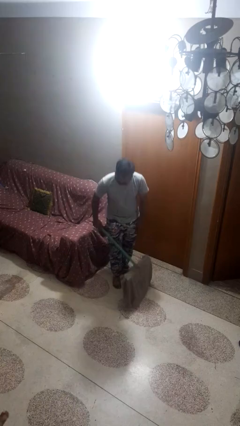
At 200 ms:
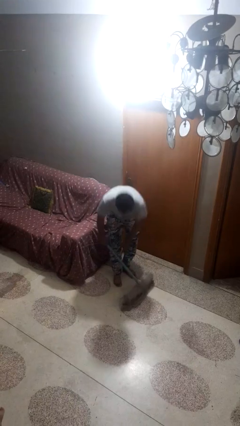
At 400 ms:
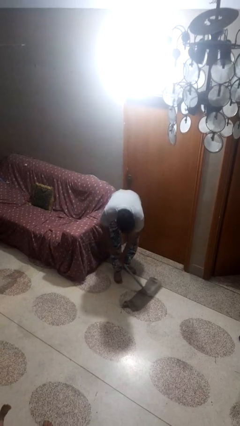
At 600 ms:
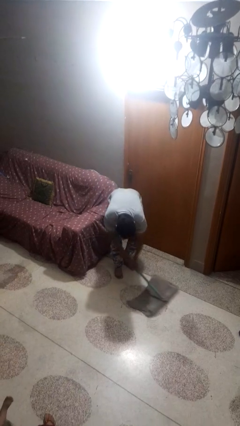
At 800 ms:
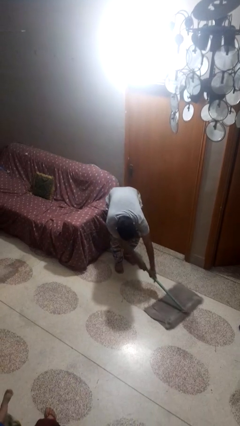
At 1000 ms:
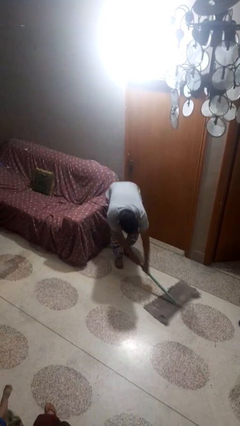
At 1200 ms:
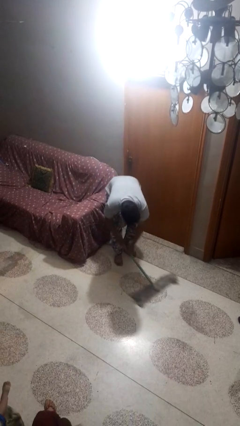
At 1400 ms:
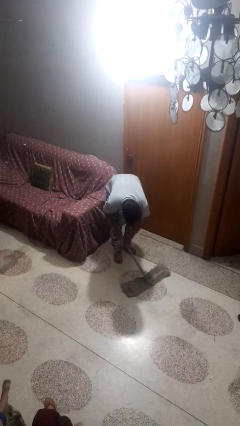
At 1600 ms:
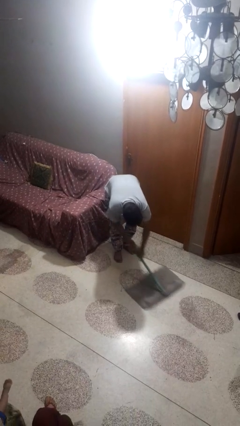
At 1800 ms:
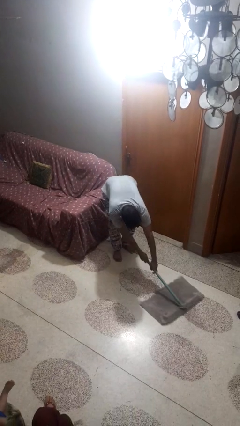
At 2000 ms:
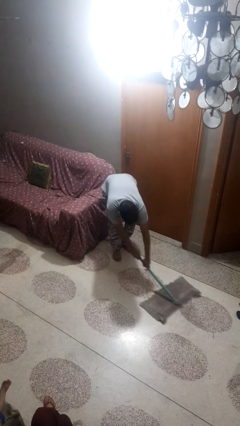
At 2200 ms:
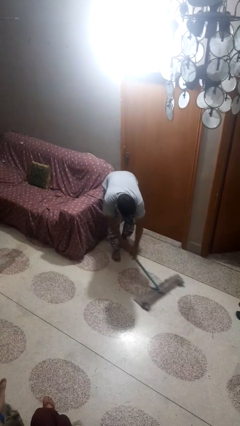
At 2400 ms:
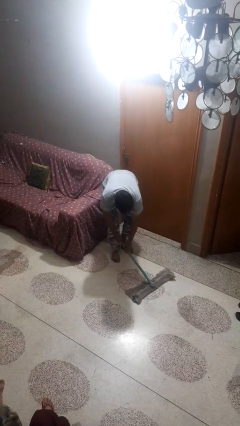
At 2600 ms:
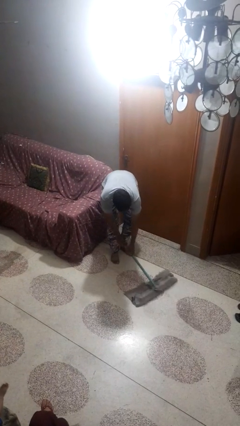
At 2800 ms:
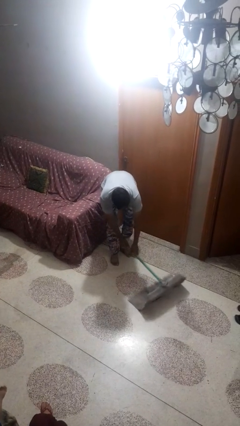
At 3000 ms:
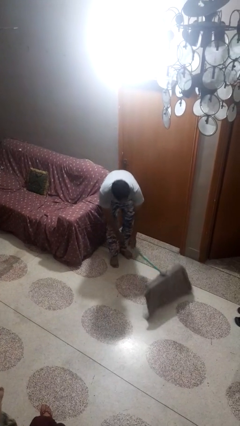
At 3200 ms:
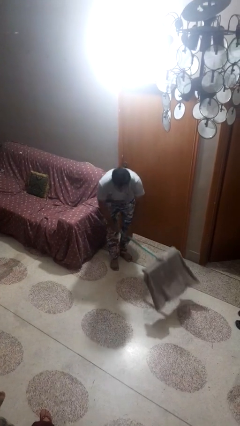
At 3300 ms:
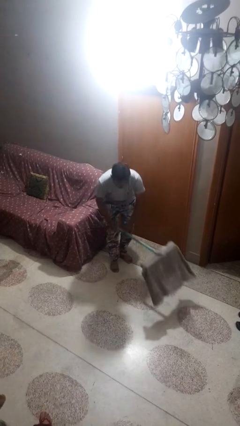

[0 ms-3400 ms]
person mops

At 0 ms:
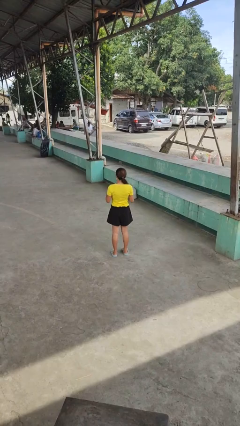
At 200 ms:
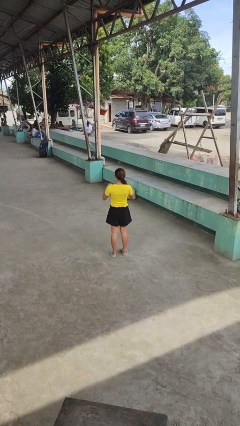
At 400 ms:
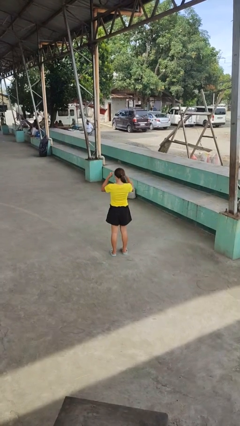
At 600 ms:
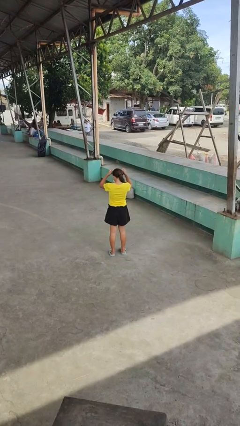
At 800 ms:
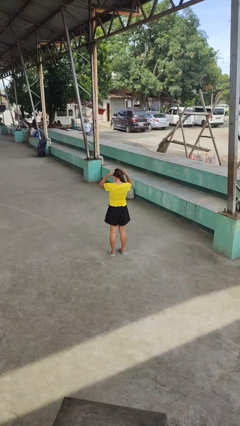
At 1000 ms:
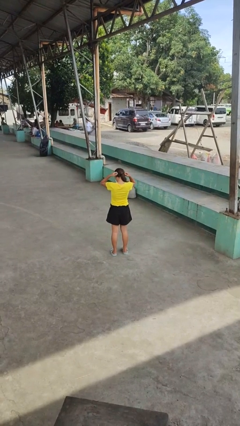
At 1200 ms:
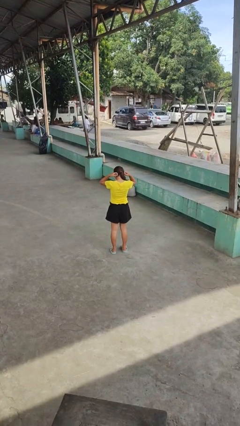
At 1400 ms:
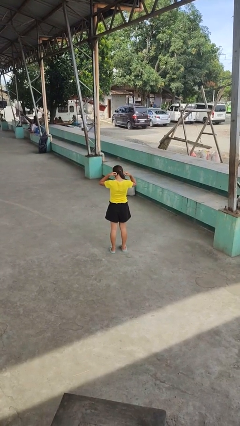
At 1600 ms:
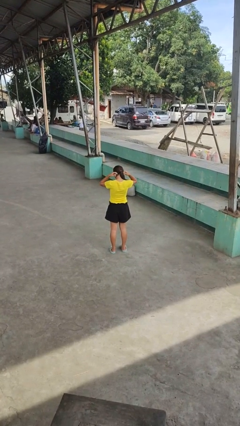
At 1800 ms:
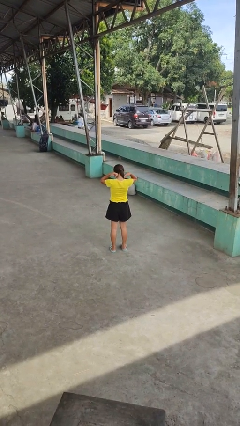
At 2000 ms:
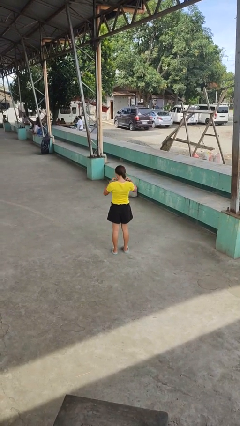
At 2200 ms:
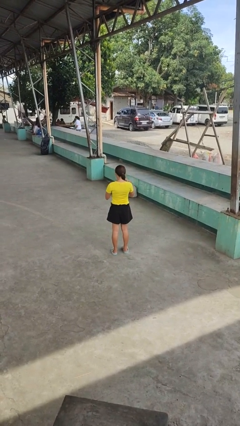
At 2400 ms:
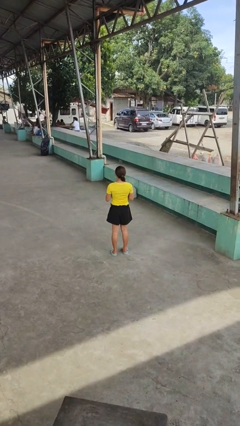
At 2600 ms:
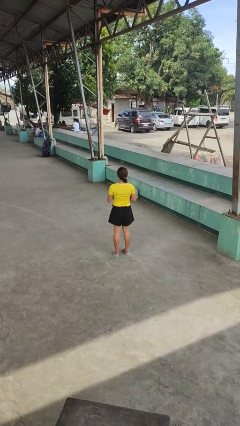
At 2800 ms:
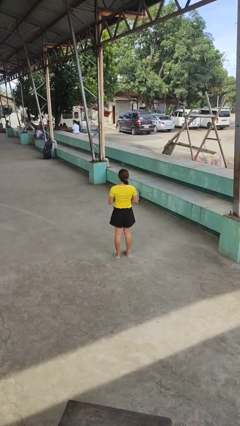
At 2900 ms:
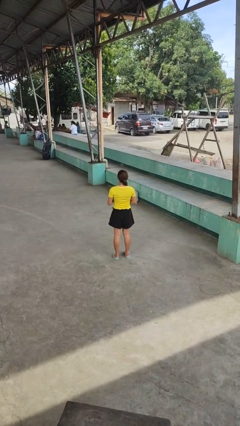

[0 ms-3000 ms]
person puts on necklace

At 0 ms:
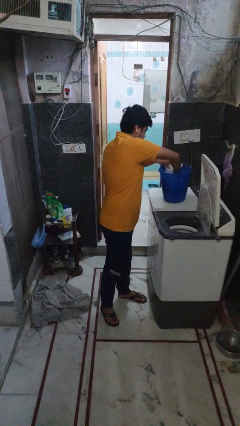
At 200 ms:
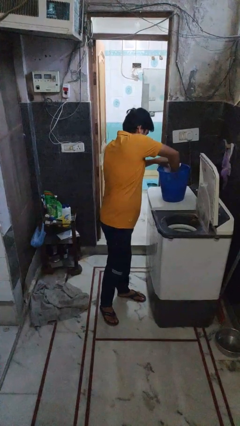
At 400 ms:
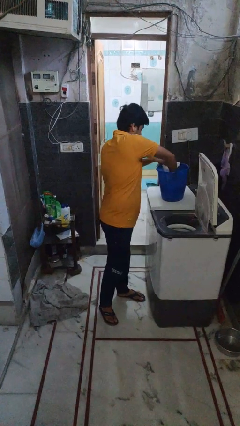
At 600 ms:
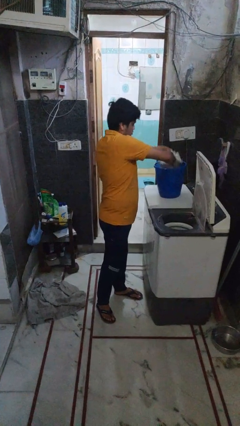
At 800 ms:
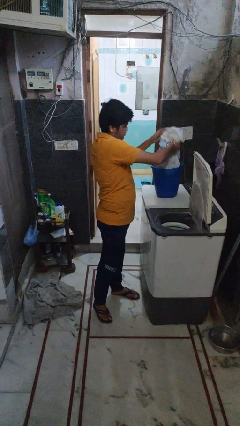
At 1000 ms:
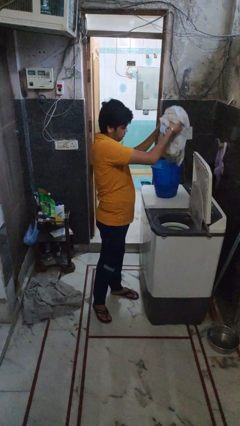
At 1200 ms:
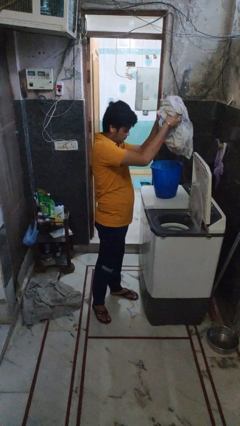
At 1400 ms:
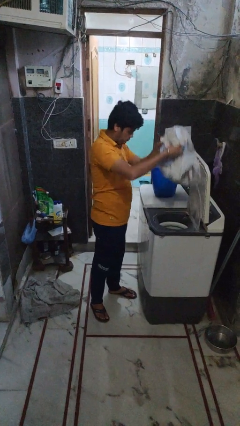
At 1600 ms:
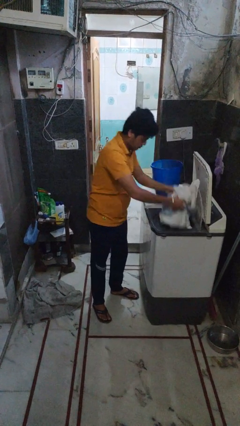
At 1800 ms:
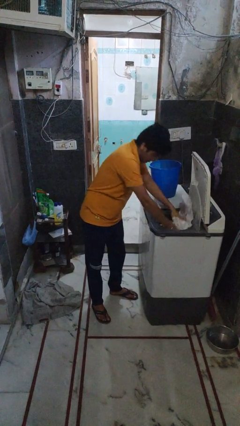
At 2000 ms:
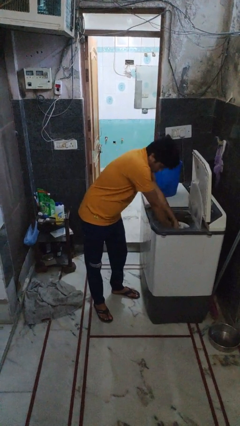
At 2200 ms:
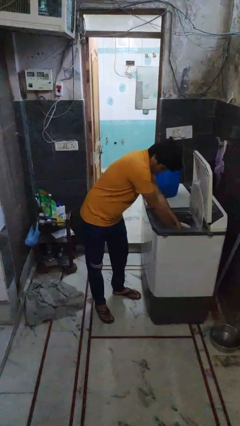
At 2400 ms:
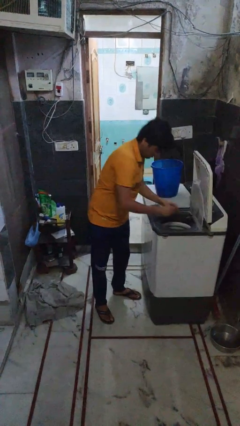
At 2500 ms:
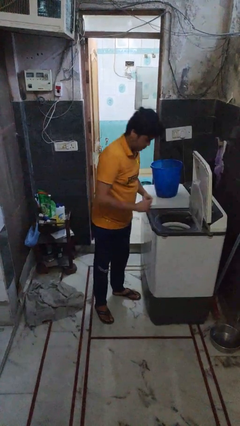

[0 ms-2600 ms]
person loads clotheswasher

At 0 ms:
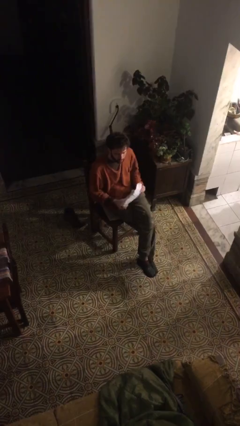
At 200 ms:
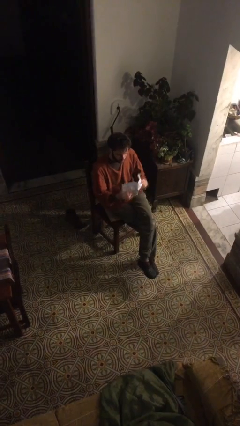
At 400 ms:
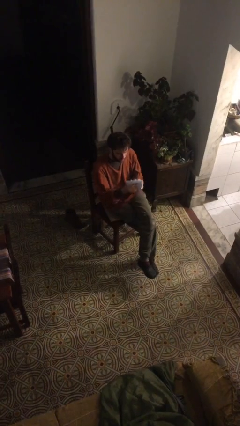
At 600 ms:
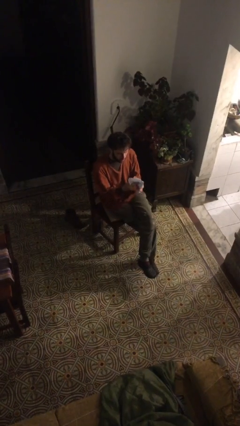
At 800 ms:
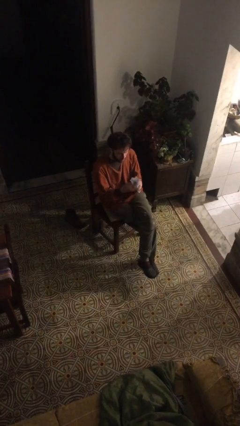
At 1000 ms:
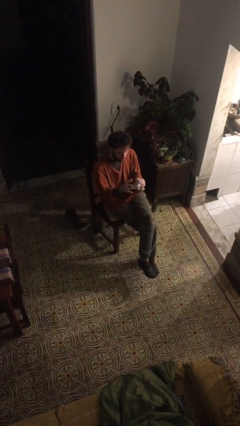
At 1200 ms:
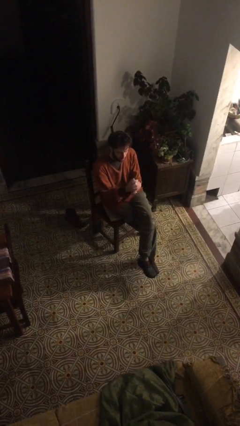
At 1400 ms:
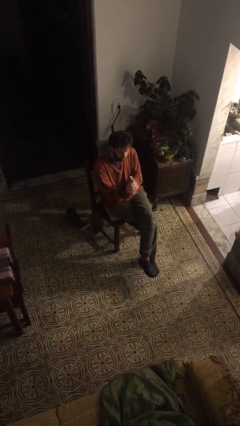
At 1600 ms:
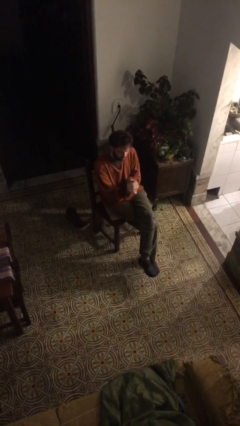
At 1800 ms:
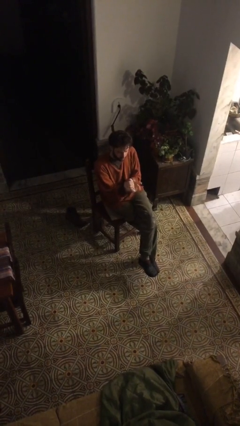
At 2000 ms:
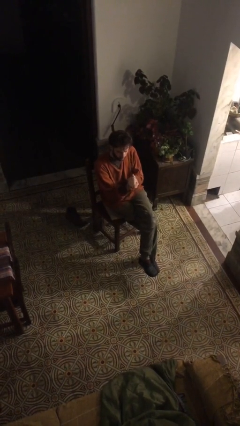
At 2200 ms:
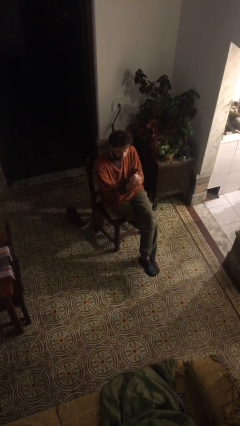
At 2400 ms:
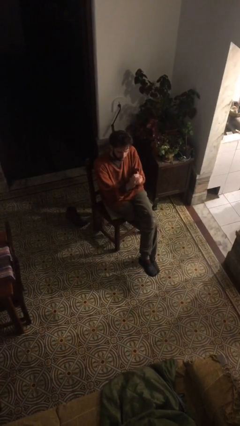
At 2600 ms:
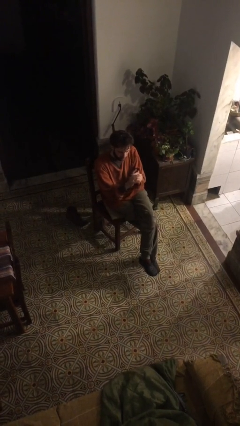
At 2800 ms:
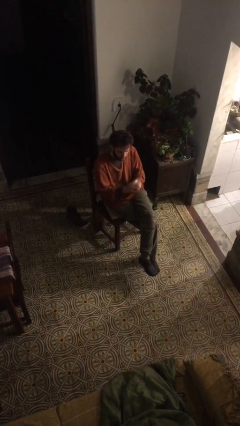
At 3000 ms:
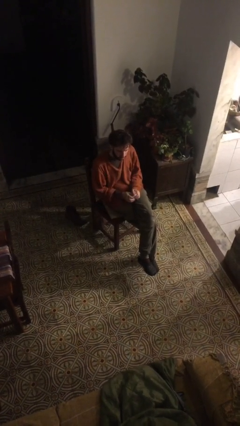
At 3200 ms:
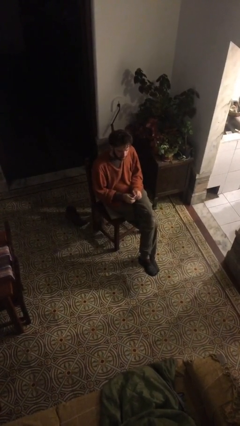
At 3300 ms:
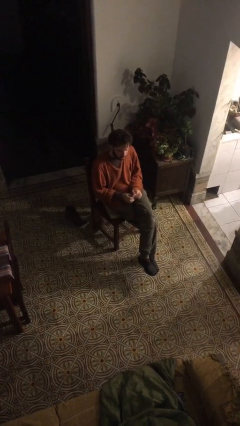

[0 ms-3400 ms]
person crumples paper

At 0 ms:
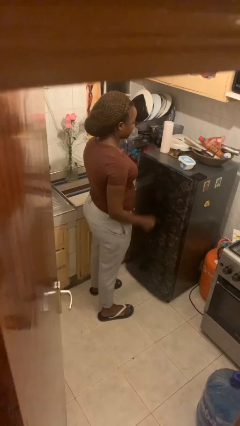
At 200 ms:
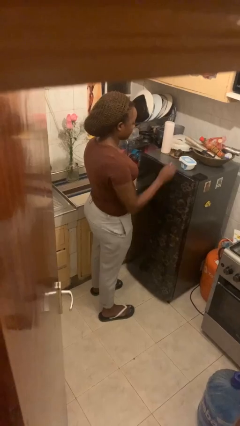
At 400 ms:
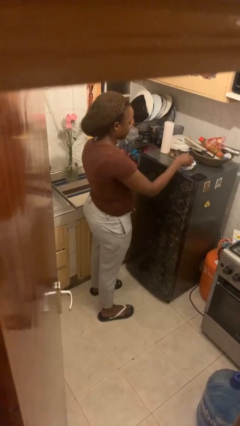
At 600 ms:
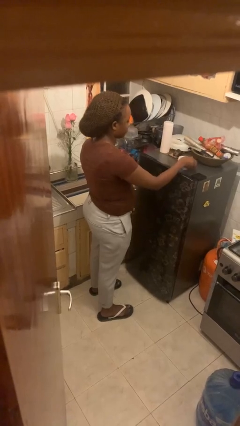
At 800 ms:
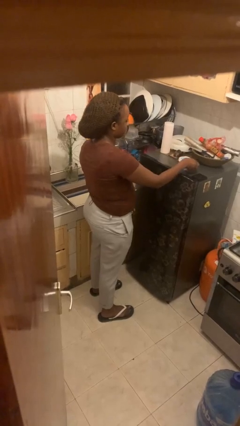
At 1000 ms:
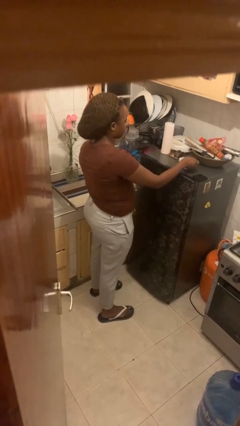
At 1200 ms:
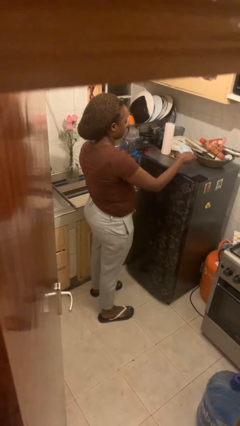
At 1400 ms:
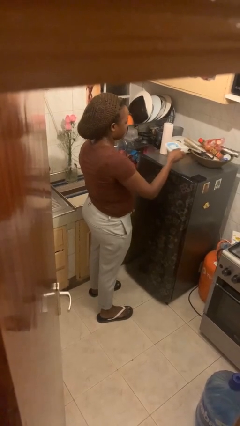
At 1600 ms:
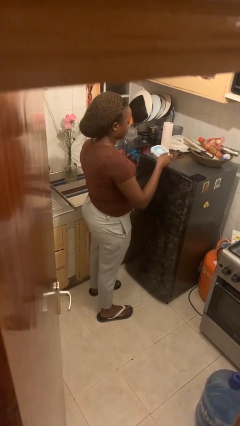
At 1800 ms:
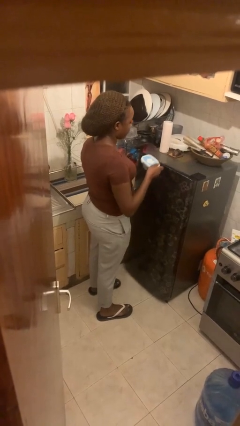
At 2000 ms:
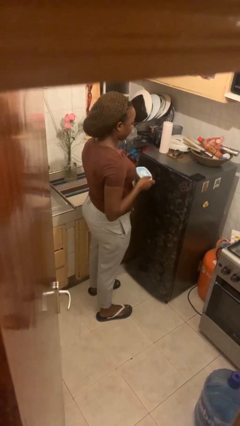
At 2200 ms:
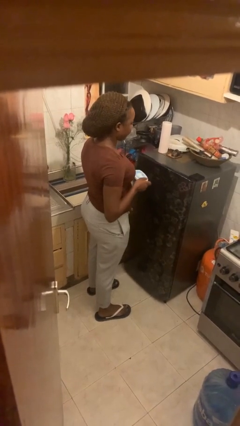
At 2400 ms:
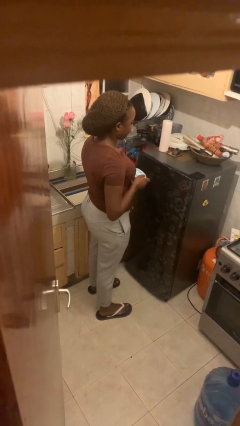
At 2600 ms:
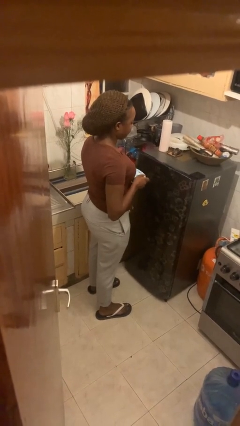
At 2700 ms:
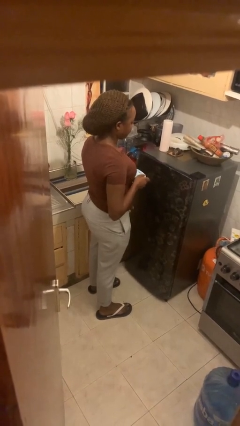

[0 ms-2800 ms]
person picks up object from countertop

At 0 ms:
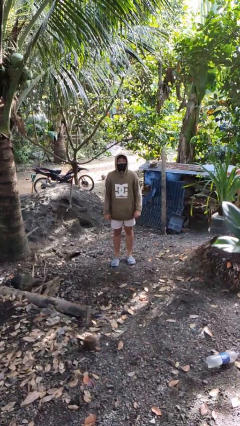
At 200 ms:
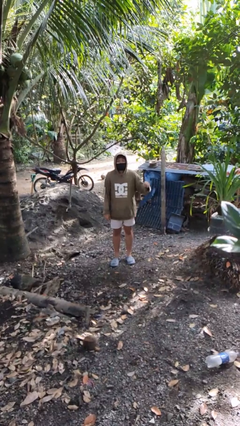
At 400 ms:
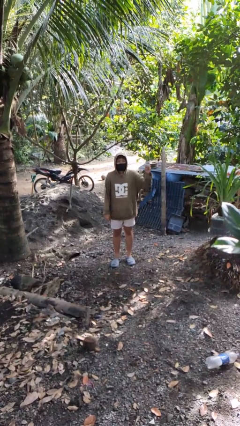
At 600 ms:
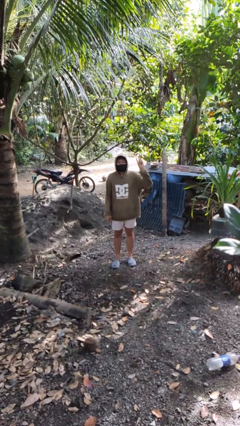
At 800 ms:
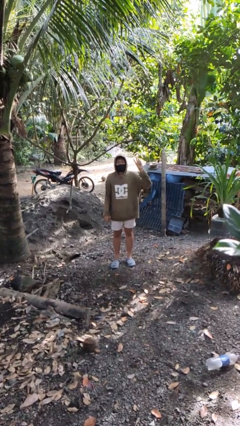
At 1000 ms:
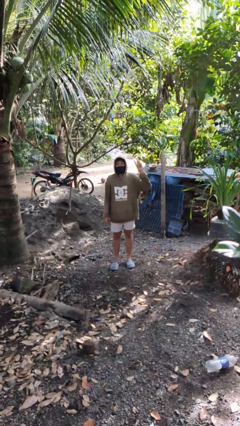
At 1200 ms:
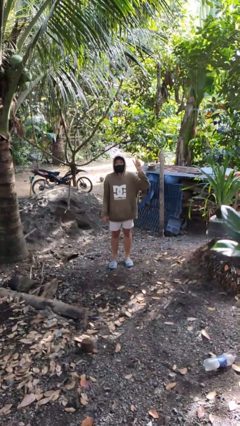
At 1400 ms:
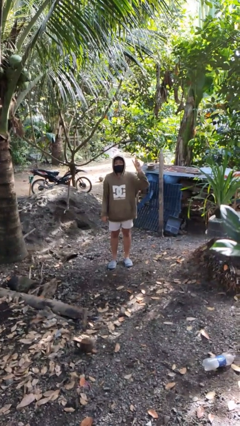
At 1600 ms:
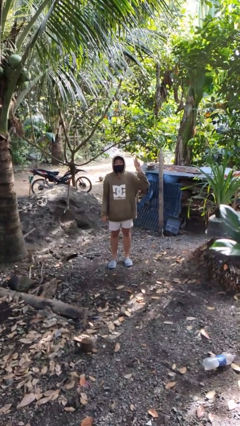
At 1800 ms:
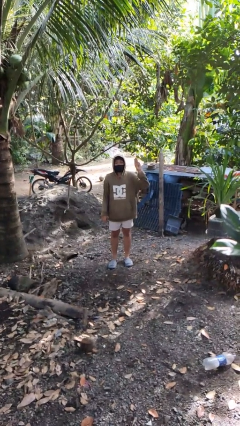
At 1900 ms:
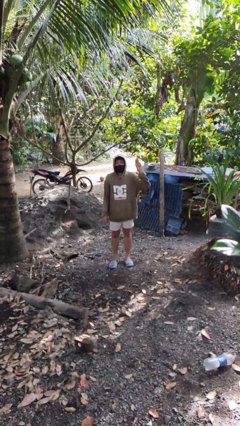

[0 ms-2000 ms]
person gestures number three
